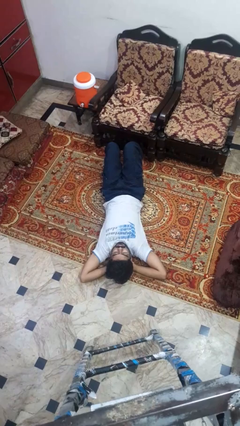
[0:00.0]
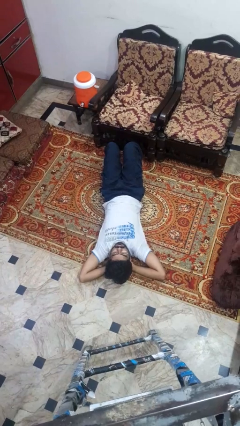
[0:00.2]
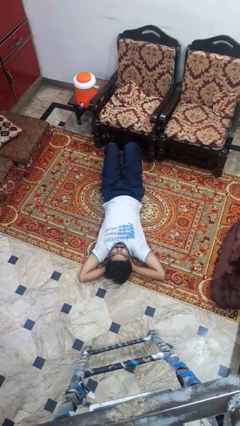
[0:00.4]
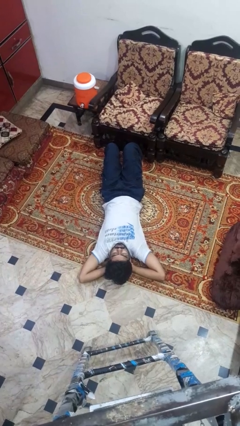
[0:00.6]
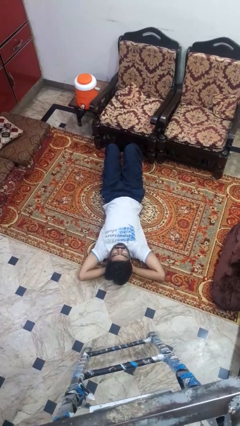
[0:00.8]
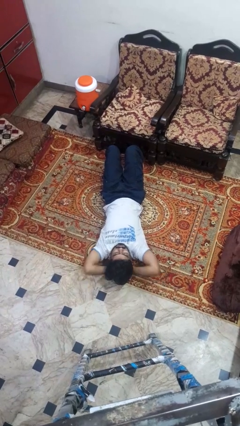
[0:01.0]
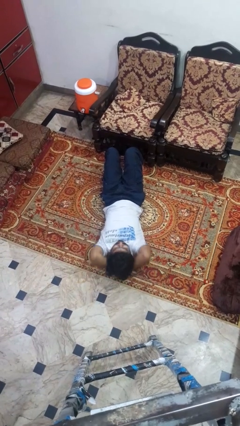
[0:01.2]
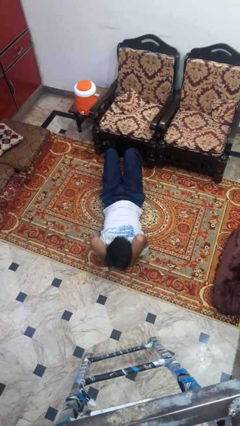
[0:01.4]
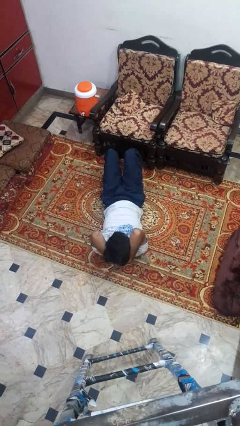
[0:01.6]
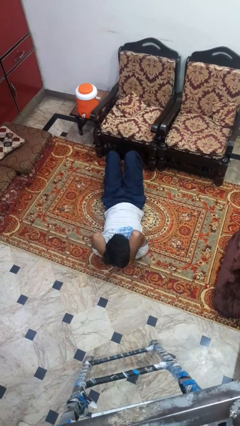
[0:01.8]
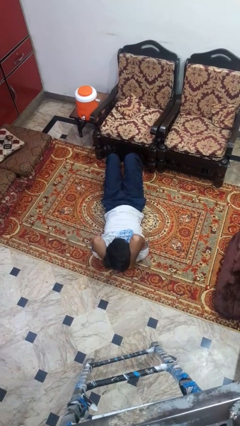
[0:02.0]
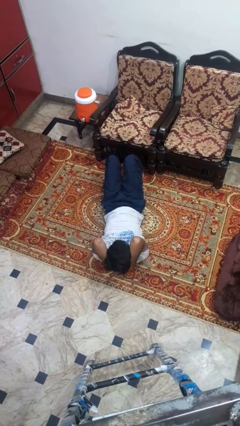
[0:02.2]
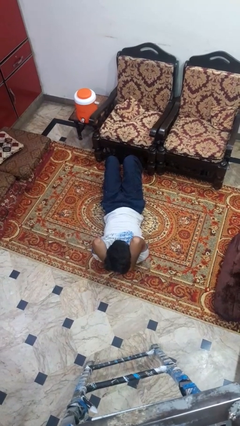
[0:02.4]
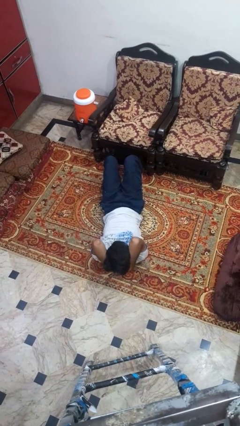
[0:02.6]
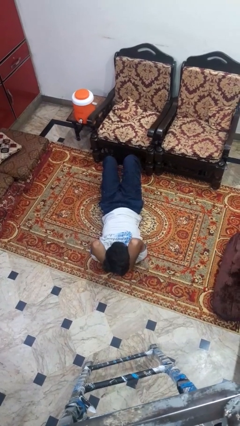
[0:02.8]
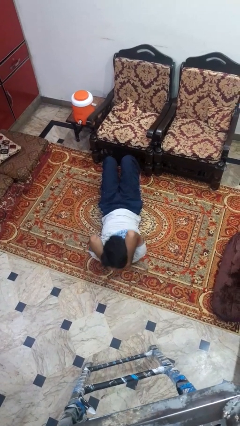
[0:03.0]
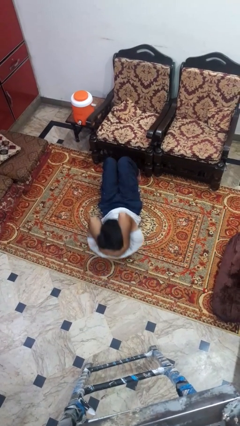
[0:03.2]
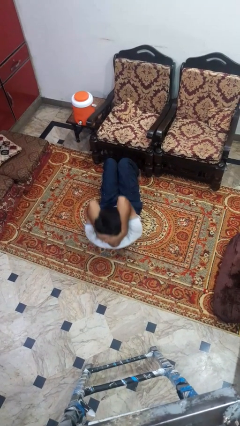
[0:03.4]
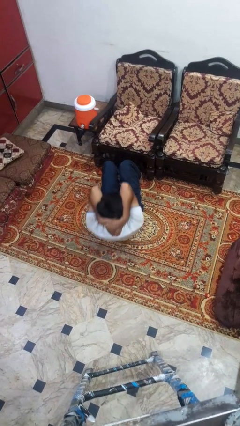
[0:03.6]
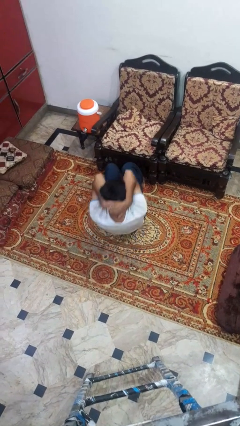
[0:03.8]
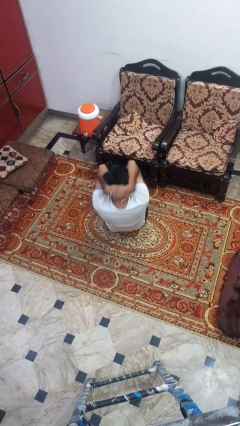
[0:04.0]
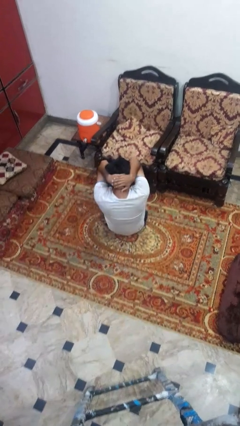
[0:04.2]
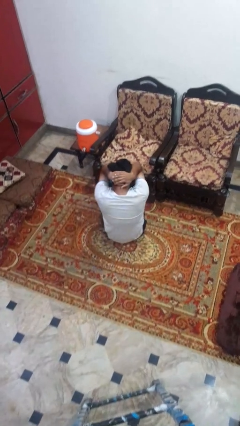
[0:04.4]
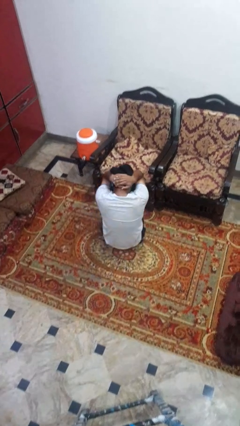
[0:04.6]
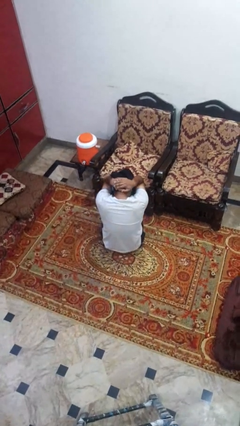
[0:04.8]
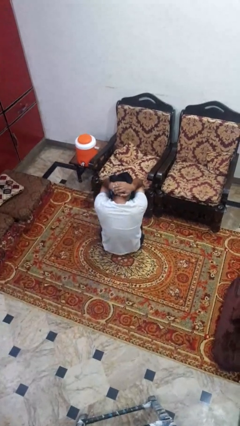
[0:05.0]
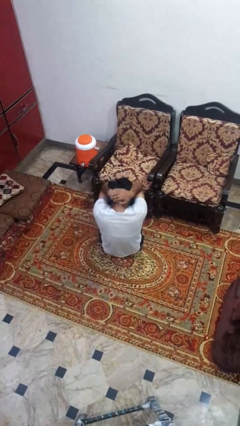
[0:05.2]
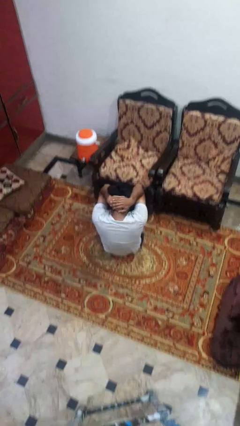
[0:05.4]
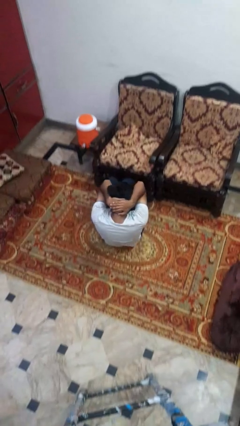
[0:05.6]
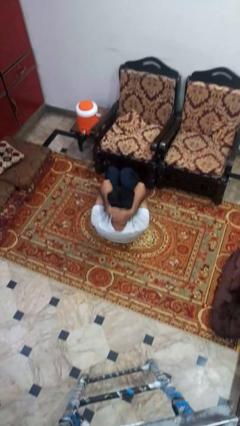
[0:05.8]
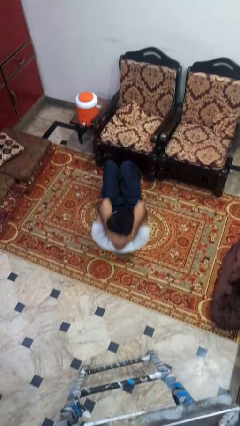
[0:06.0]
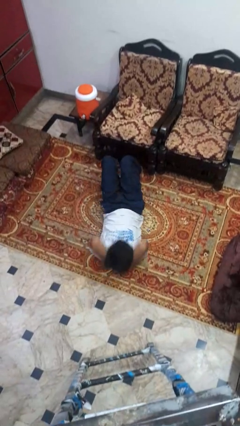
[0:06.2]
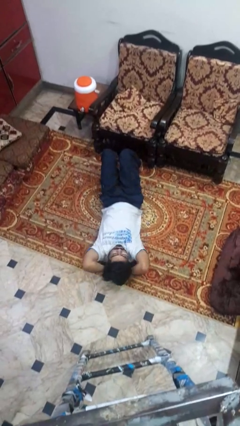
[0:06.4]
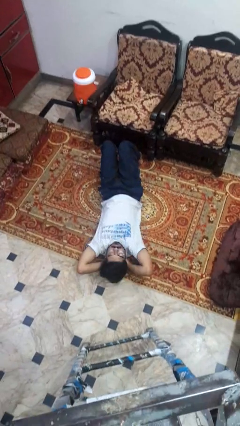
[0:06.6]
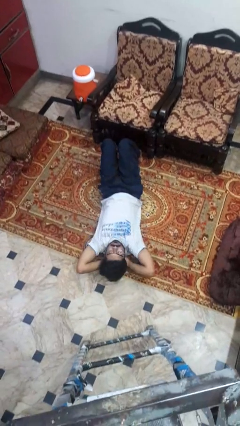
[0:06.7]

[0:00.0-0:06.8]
person exercises with situp

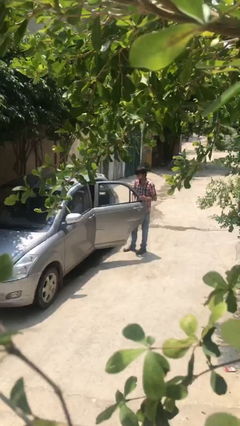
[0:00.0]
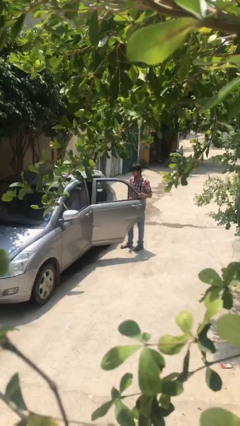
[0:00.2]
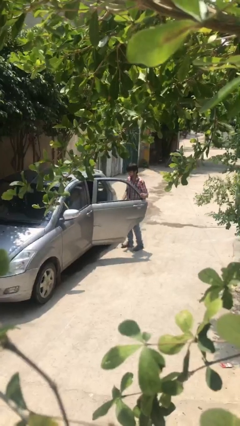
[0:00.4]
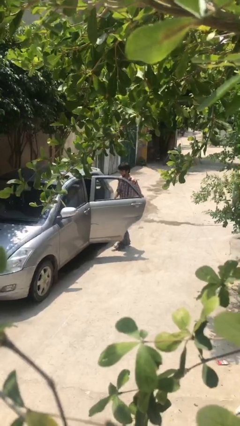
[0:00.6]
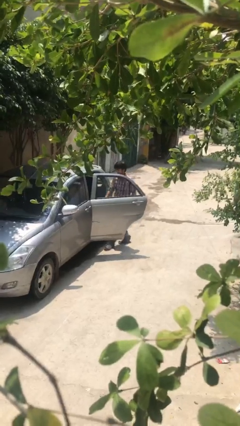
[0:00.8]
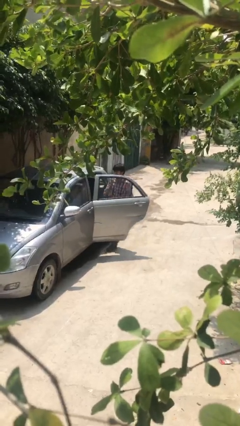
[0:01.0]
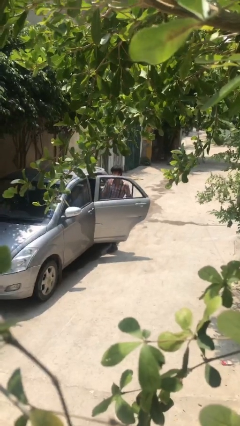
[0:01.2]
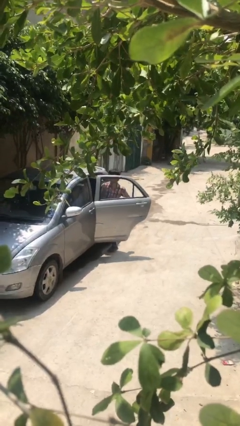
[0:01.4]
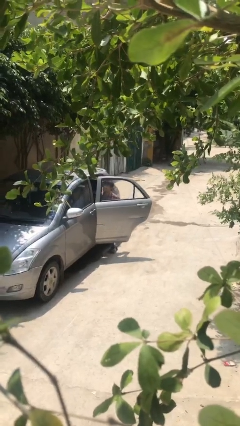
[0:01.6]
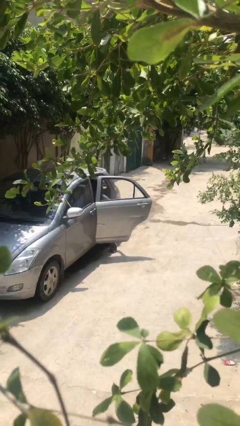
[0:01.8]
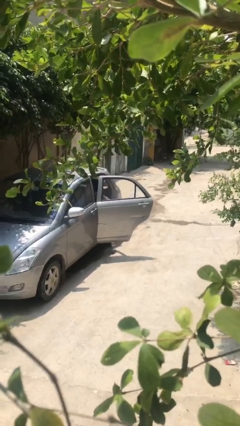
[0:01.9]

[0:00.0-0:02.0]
person enters car

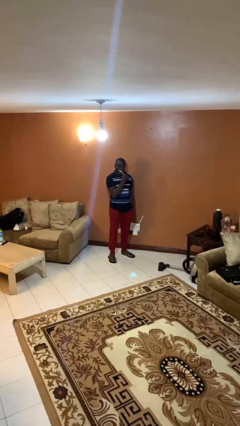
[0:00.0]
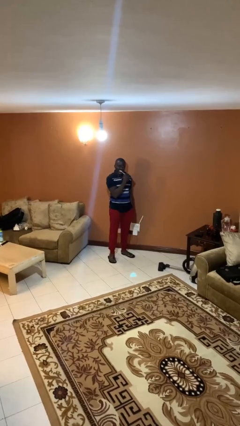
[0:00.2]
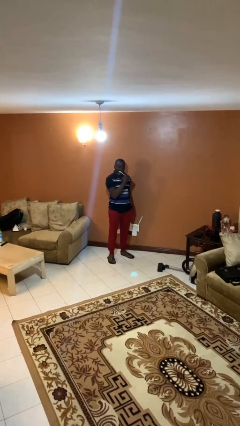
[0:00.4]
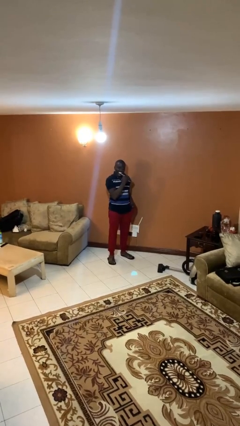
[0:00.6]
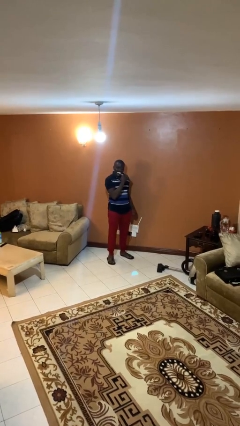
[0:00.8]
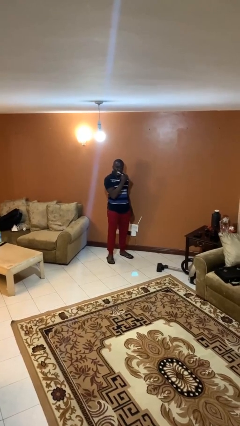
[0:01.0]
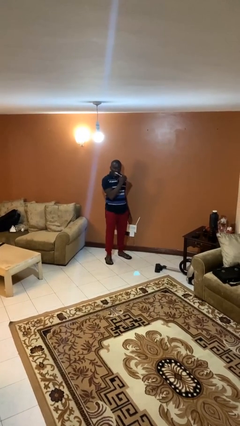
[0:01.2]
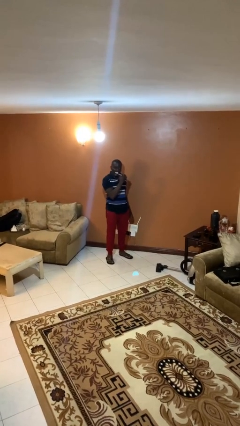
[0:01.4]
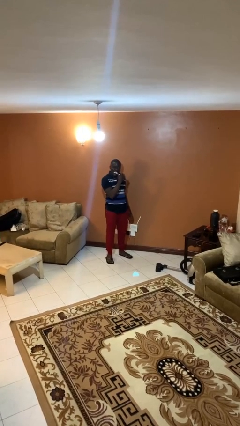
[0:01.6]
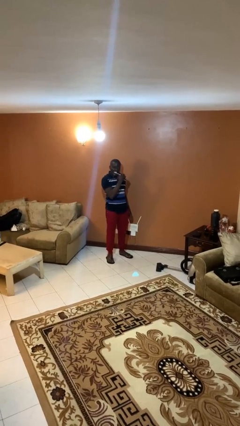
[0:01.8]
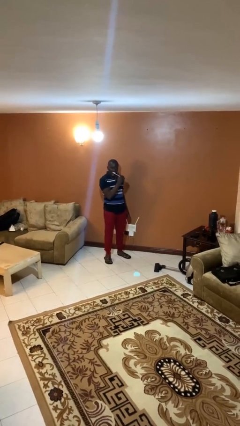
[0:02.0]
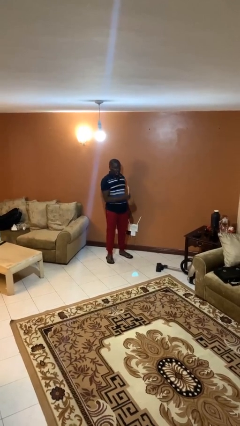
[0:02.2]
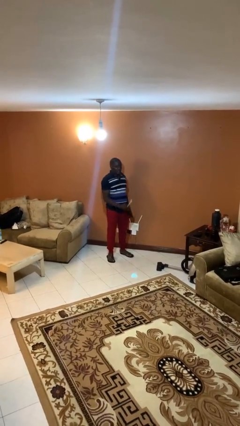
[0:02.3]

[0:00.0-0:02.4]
person brushes teeth

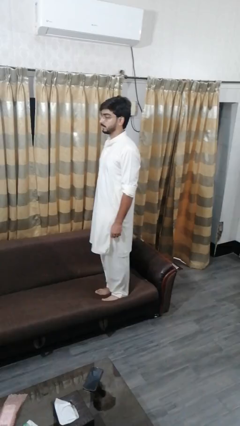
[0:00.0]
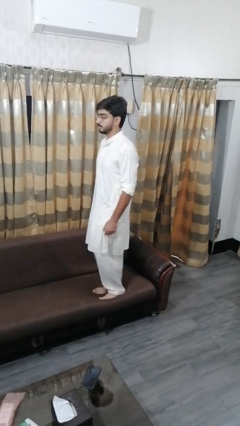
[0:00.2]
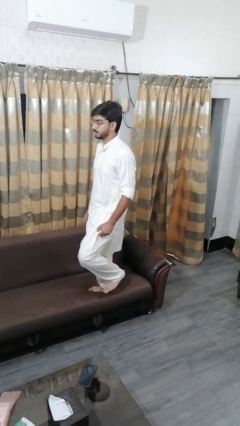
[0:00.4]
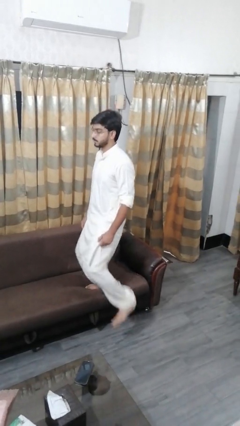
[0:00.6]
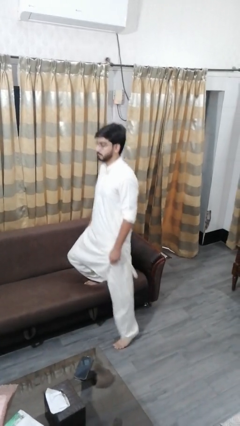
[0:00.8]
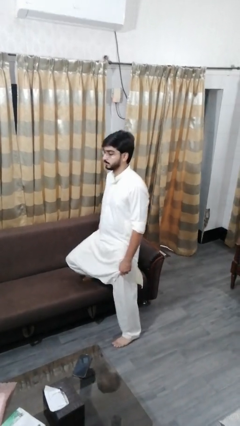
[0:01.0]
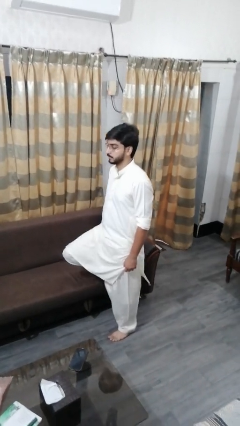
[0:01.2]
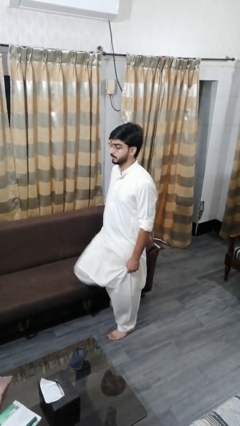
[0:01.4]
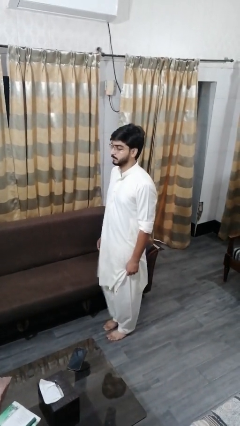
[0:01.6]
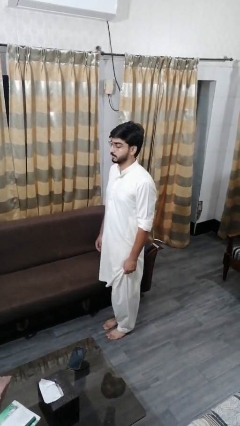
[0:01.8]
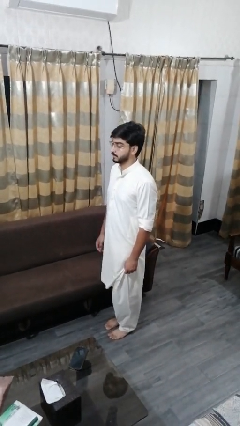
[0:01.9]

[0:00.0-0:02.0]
person climbs off couch

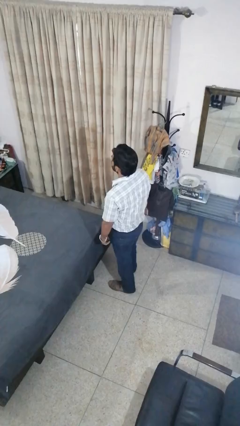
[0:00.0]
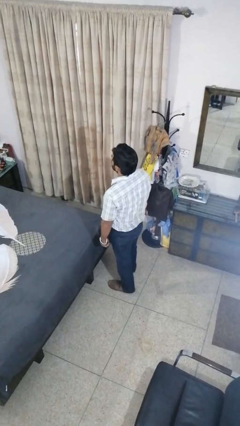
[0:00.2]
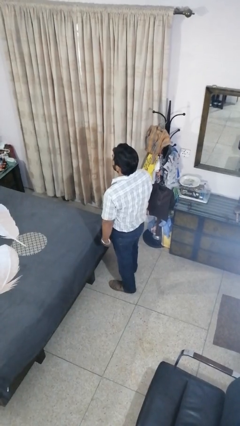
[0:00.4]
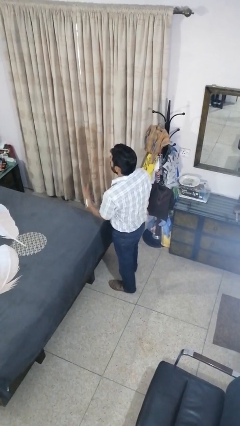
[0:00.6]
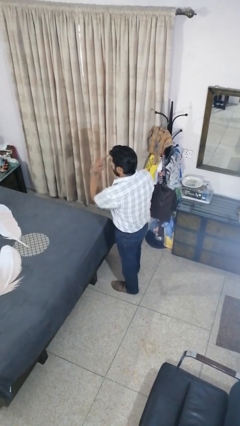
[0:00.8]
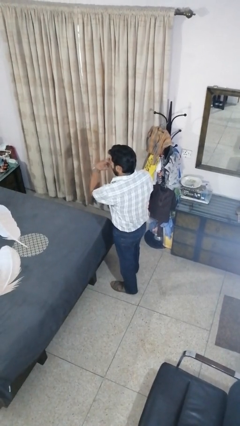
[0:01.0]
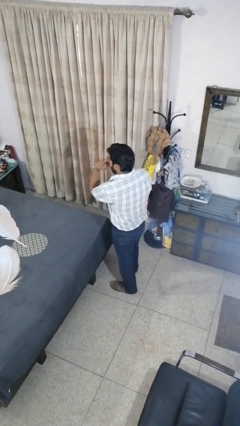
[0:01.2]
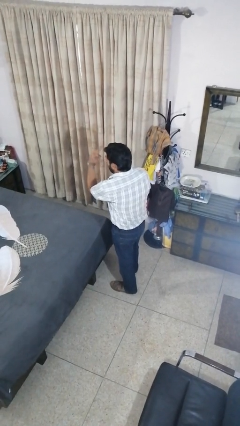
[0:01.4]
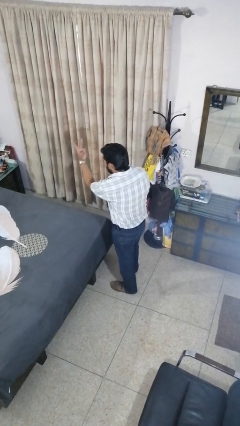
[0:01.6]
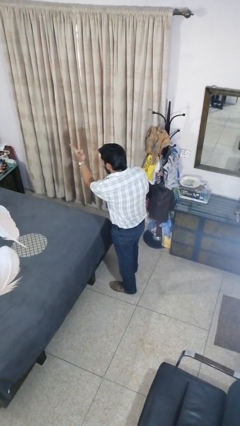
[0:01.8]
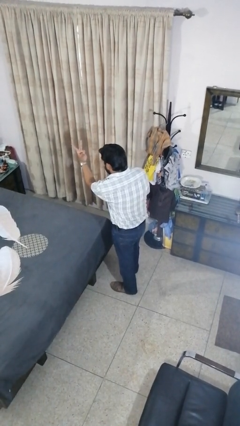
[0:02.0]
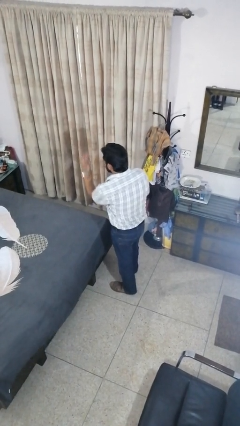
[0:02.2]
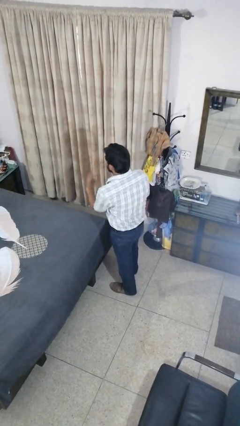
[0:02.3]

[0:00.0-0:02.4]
person gestures watch closely

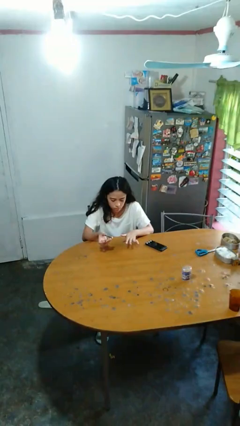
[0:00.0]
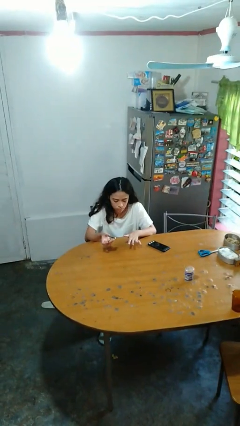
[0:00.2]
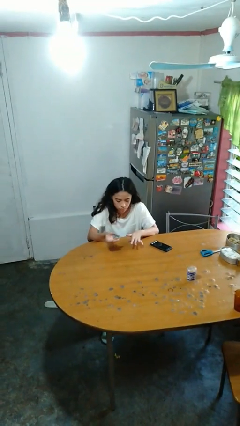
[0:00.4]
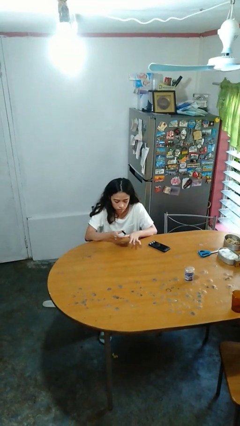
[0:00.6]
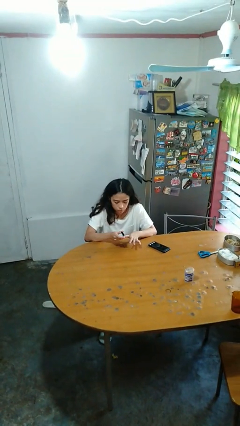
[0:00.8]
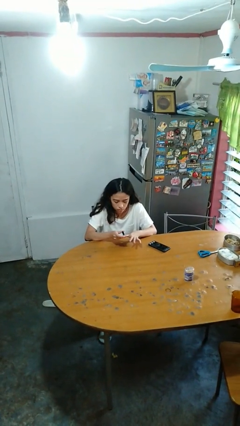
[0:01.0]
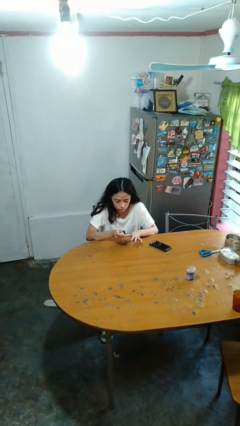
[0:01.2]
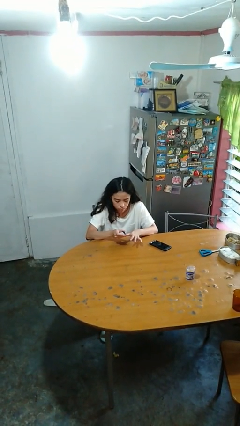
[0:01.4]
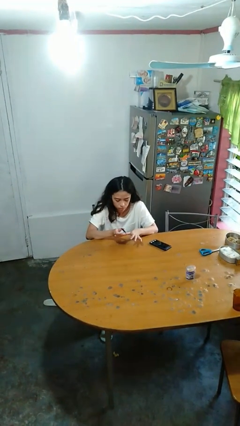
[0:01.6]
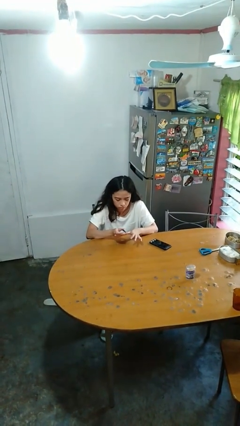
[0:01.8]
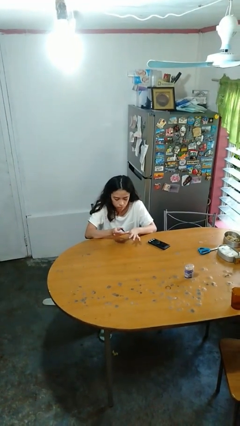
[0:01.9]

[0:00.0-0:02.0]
person clips fingernails

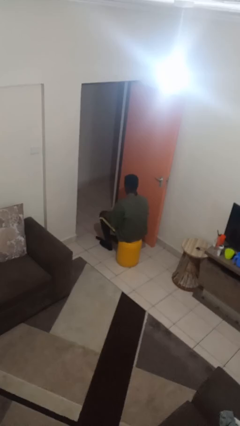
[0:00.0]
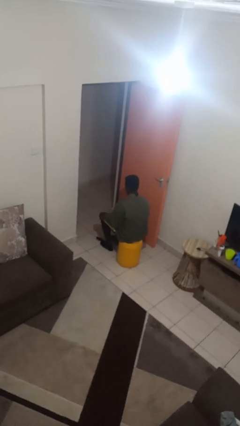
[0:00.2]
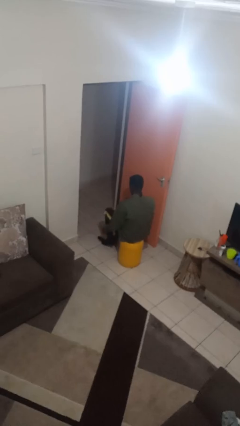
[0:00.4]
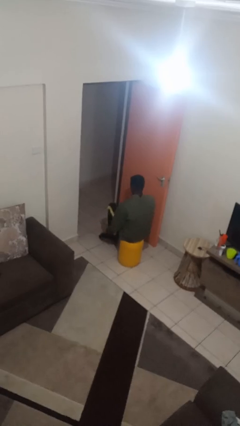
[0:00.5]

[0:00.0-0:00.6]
person takes off socks
